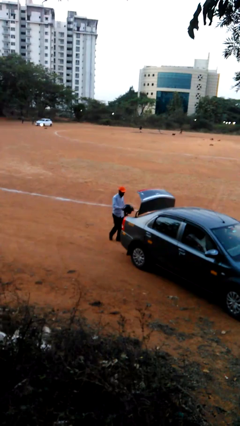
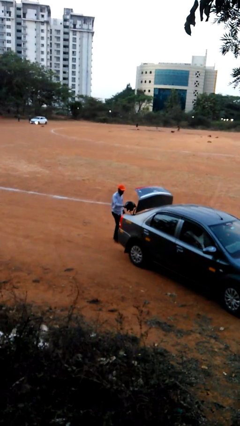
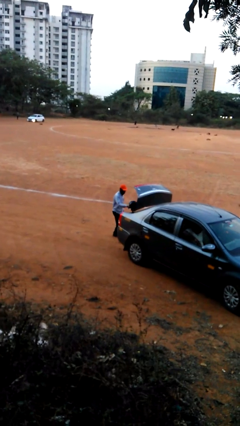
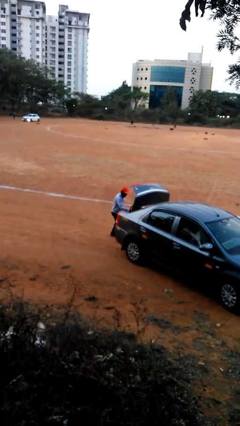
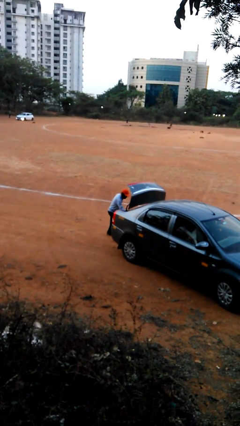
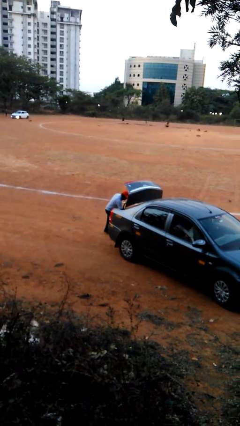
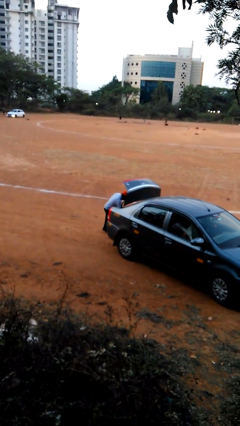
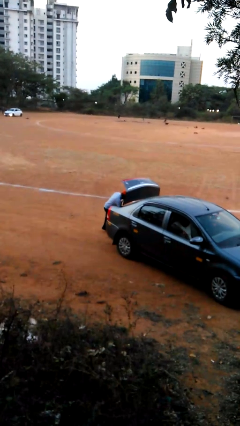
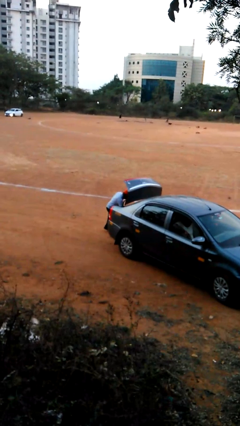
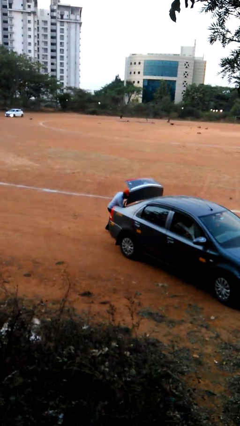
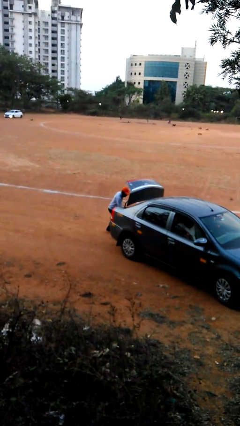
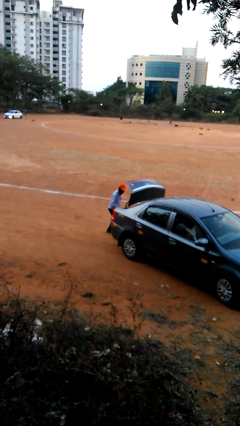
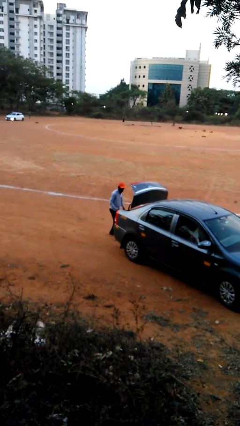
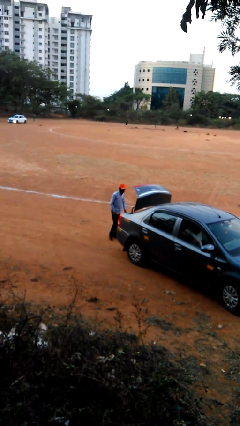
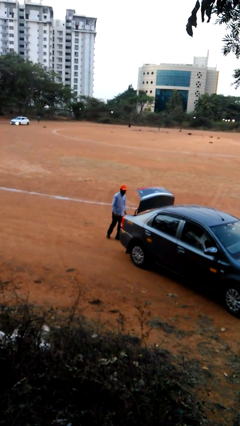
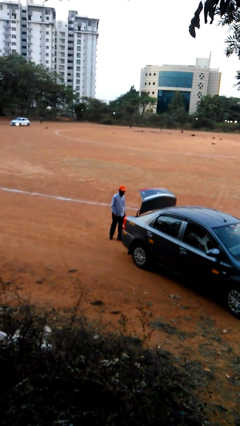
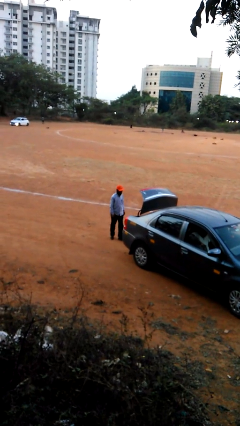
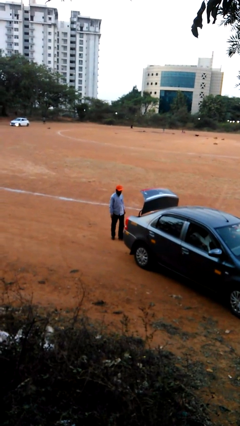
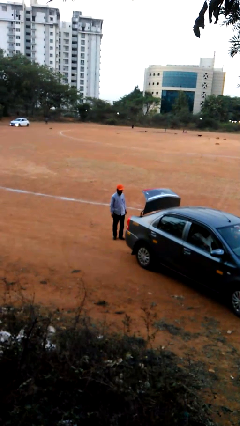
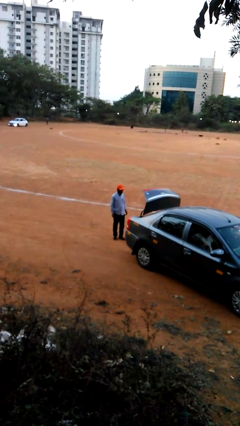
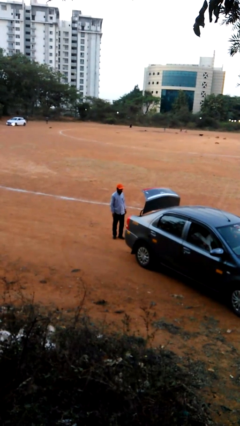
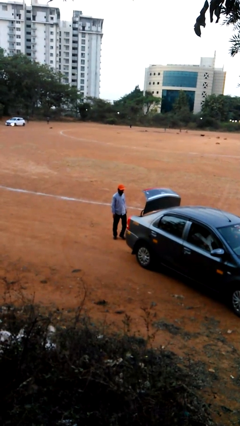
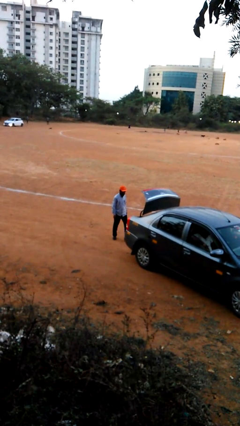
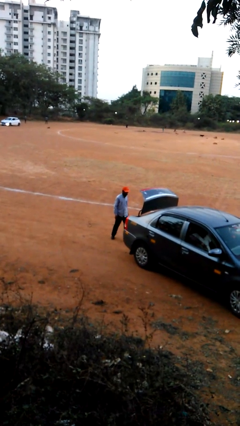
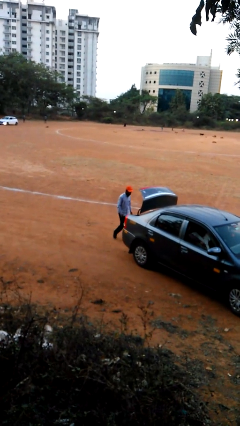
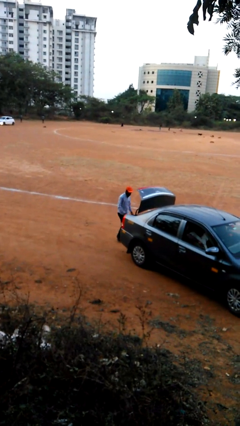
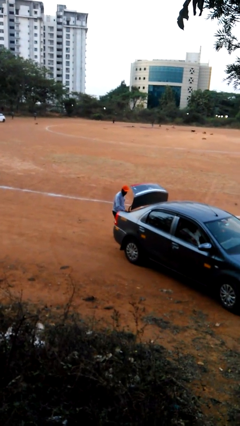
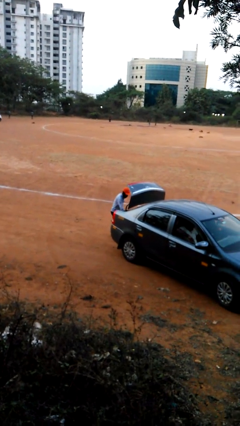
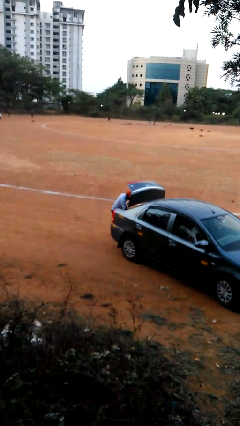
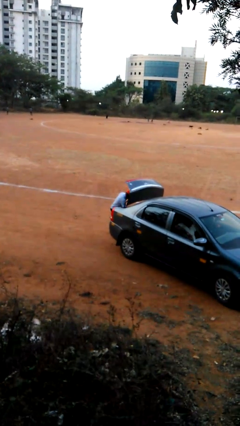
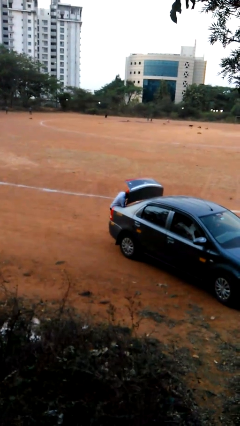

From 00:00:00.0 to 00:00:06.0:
person loads car

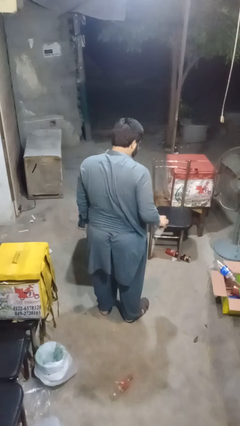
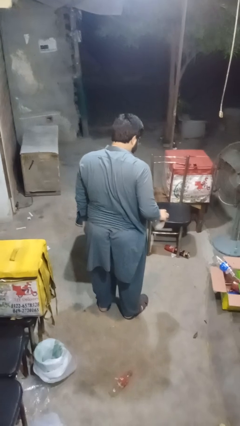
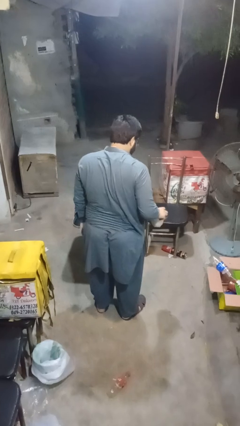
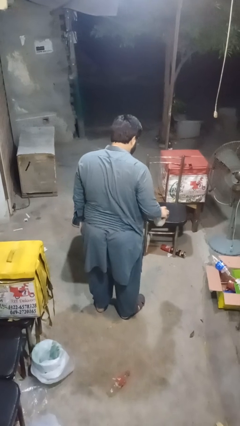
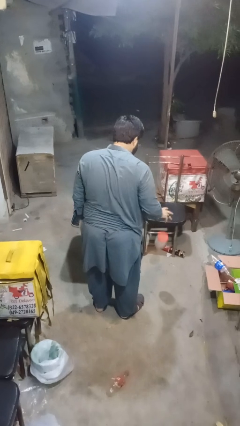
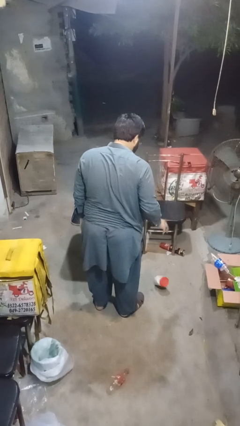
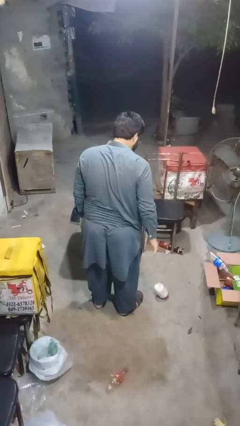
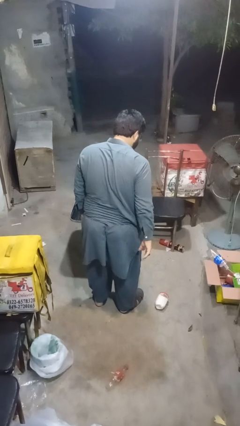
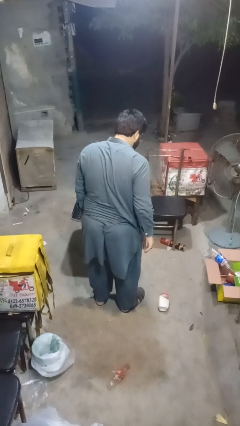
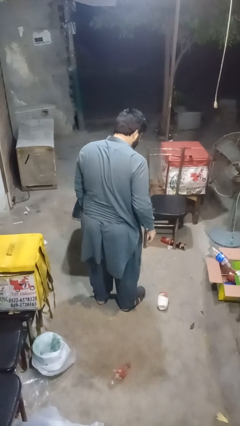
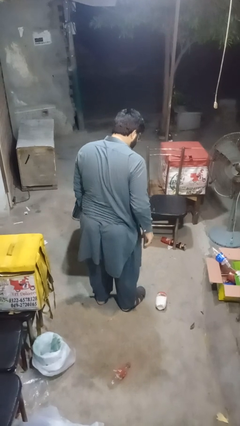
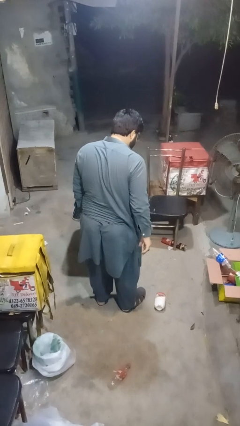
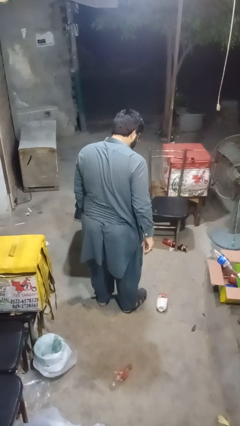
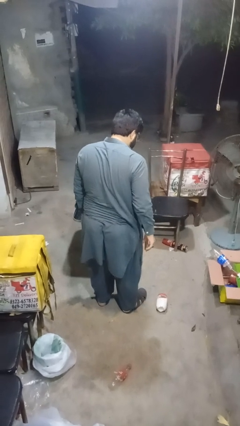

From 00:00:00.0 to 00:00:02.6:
person throws object to ground

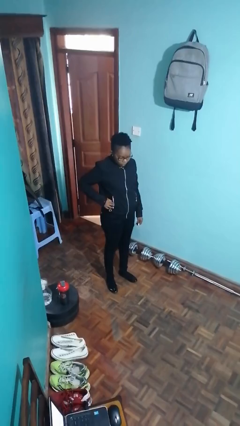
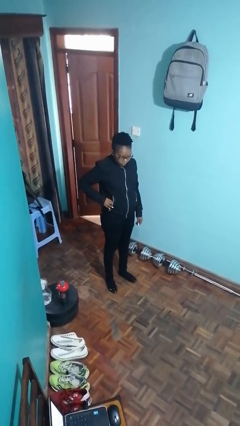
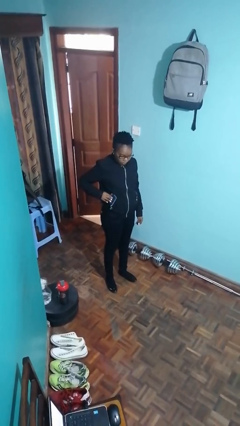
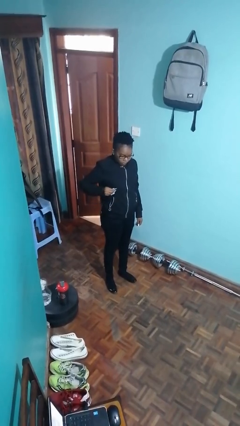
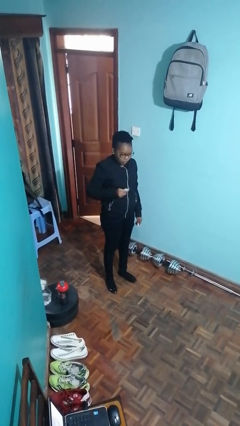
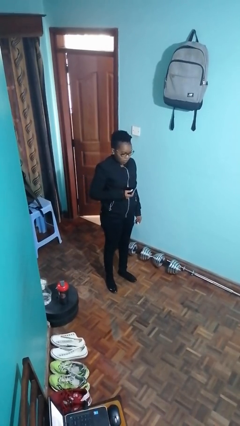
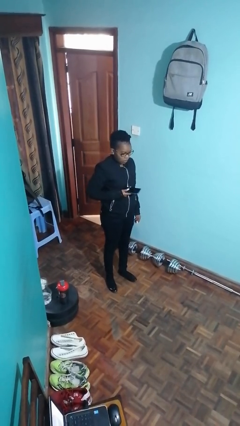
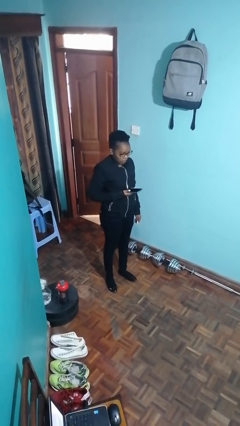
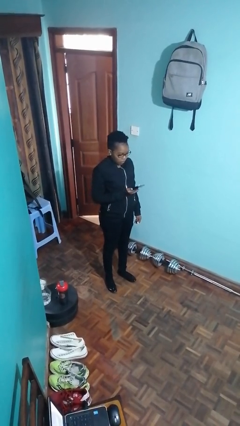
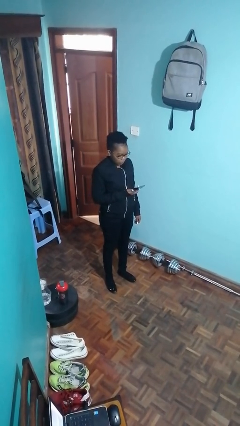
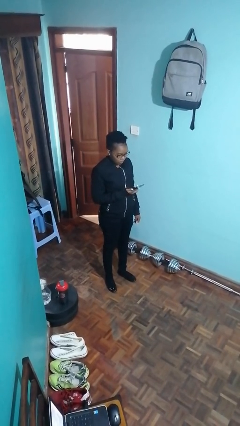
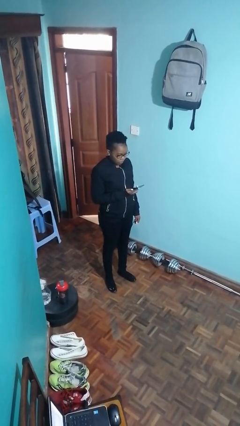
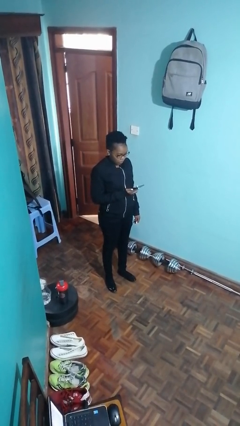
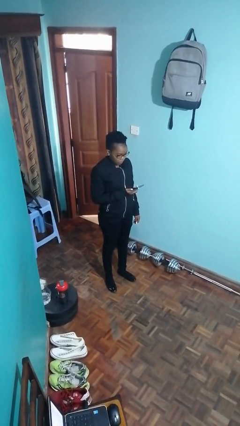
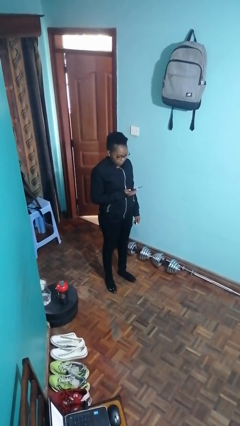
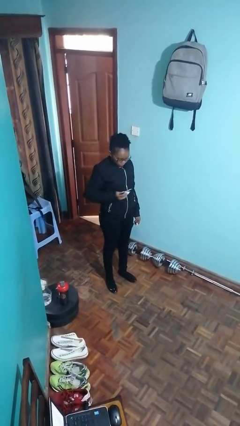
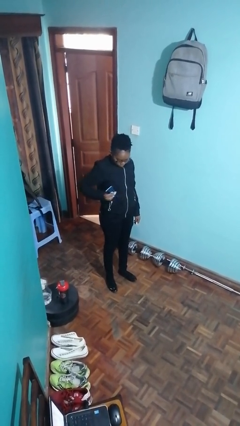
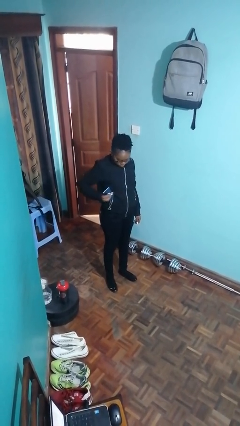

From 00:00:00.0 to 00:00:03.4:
person takes phone from pocket

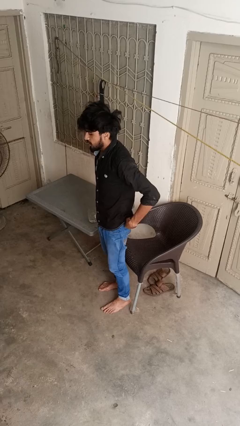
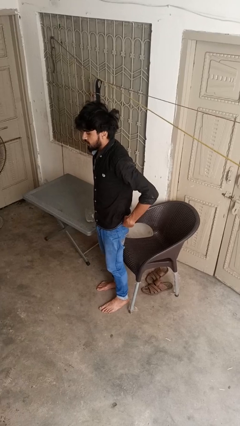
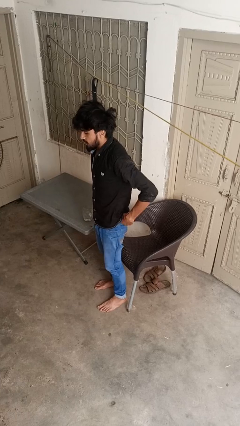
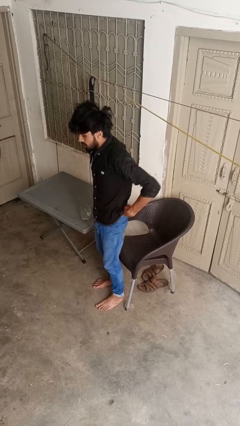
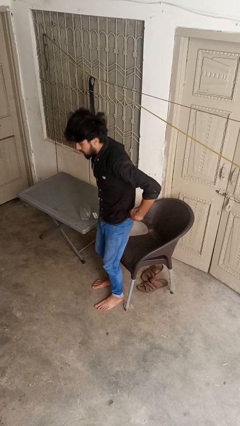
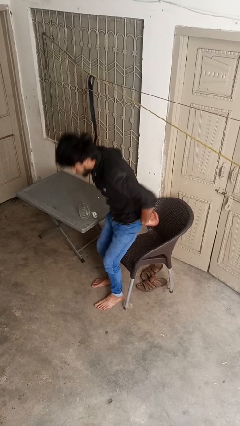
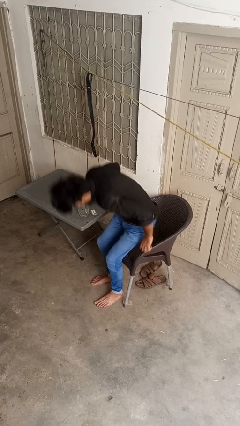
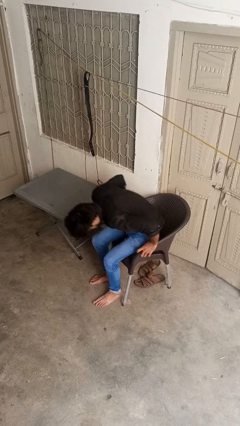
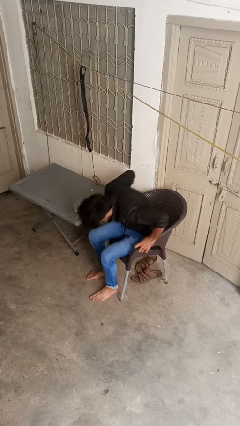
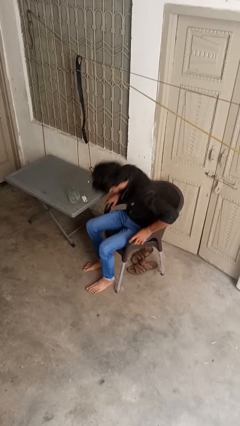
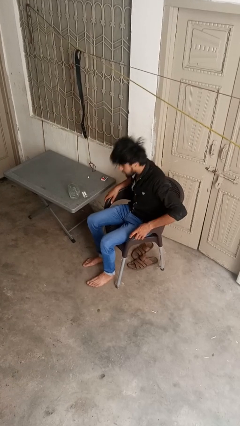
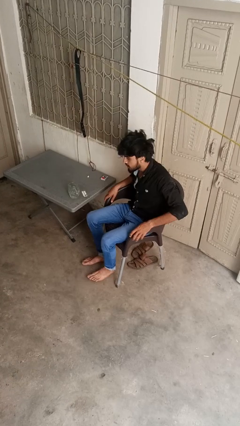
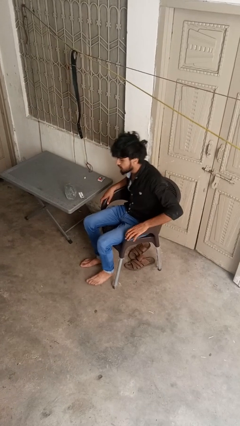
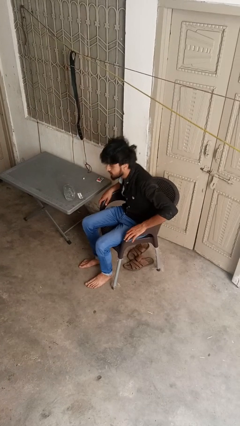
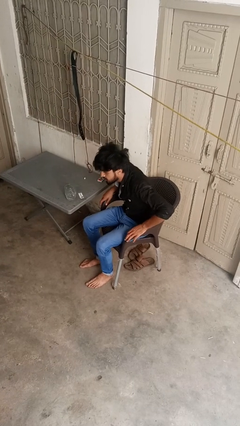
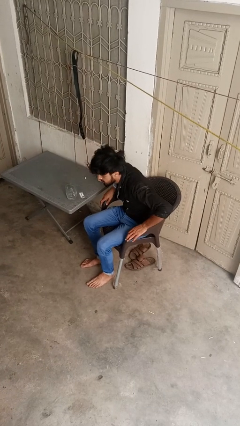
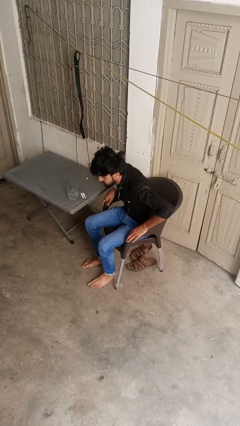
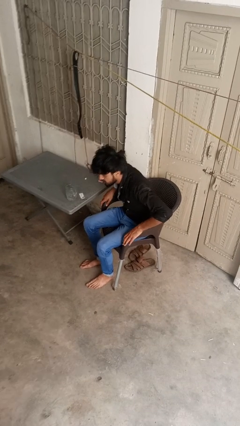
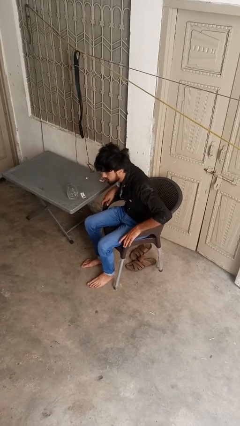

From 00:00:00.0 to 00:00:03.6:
person sits down

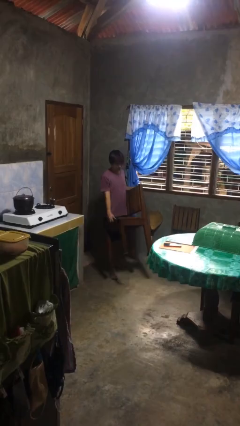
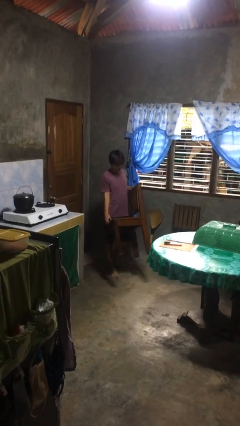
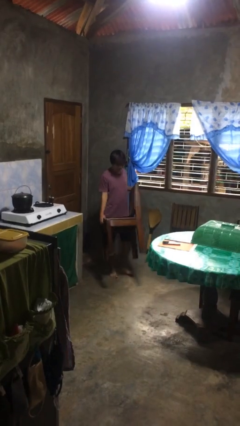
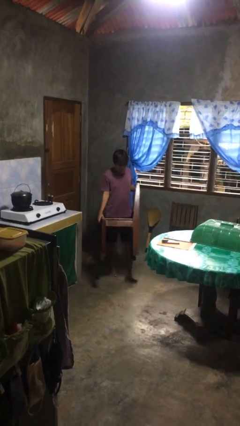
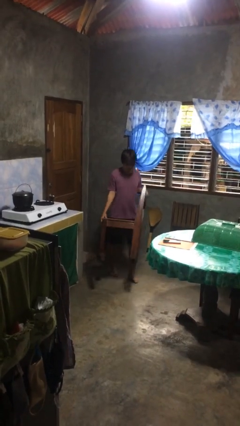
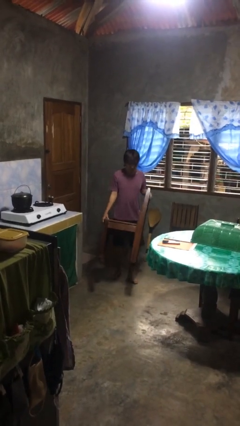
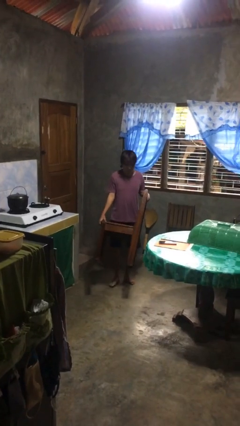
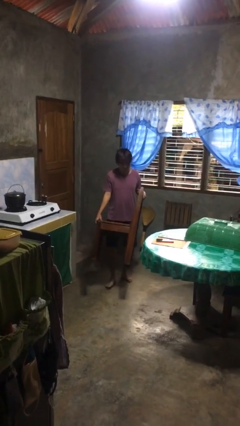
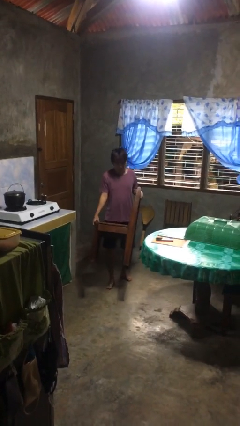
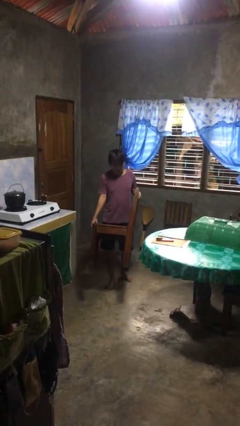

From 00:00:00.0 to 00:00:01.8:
person carries heavy object

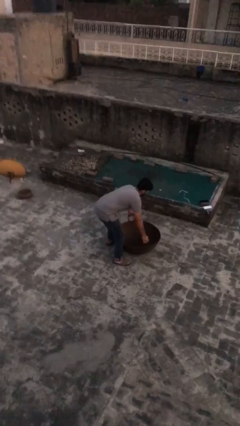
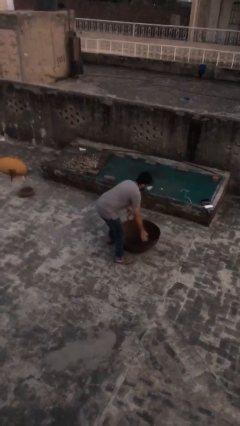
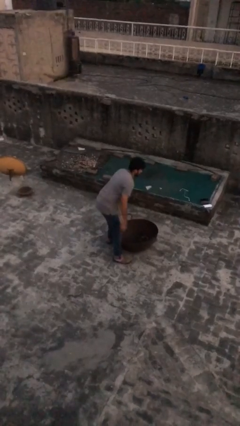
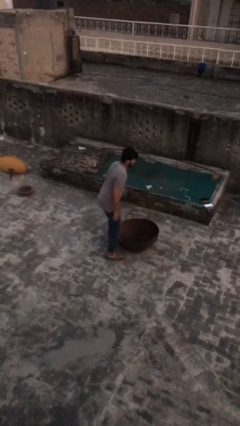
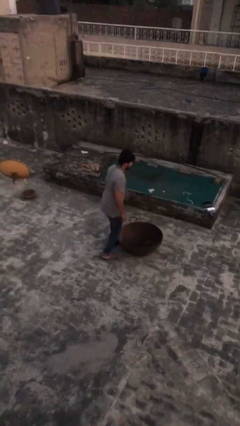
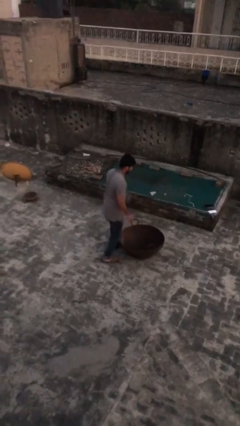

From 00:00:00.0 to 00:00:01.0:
person puts down object on floor
